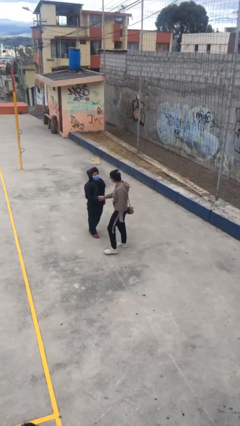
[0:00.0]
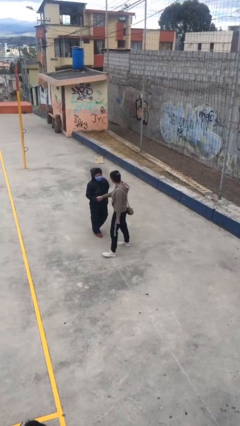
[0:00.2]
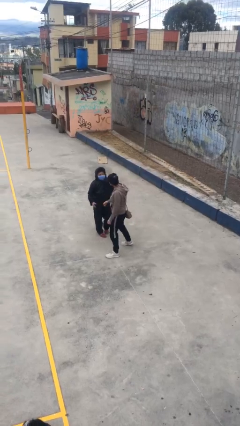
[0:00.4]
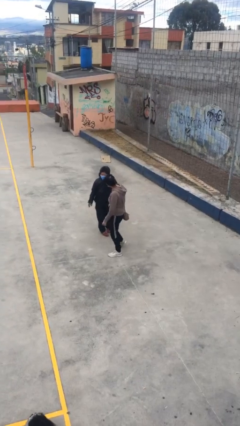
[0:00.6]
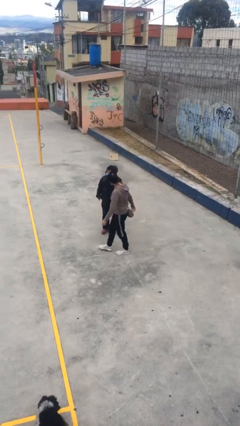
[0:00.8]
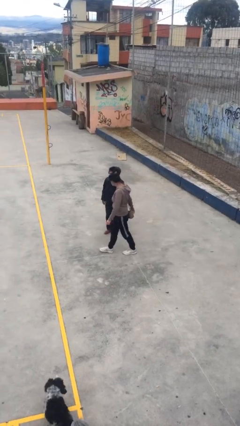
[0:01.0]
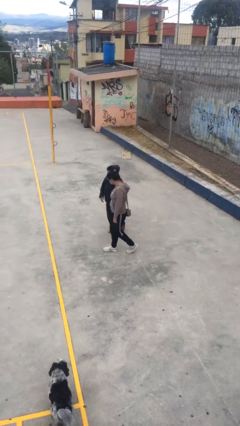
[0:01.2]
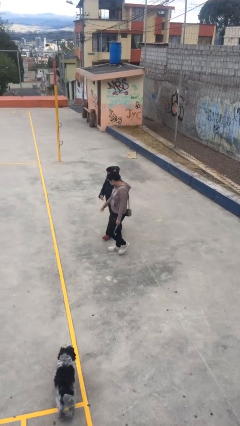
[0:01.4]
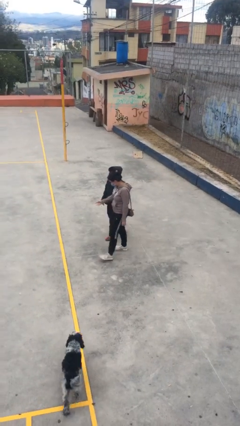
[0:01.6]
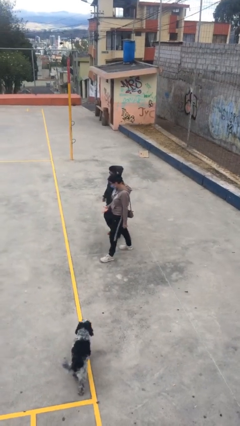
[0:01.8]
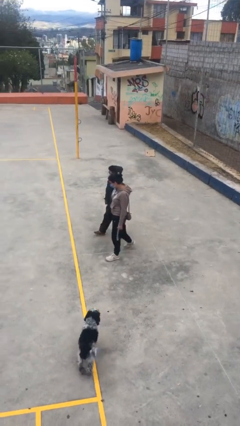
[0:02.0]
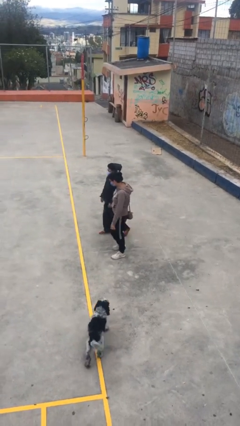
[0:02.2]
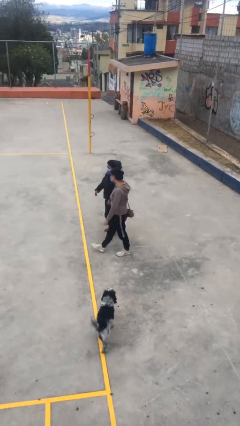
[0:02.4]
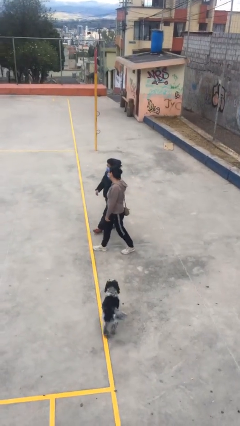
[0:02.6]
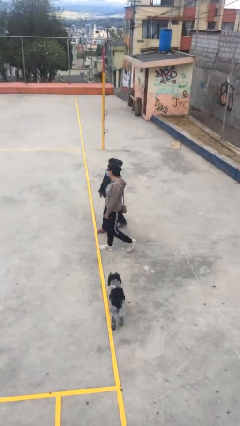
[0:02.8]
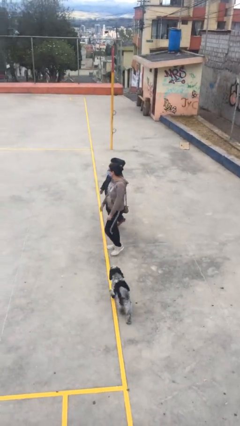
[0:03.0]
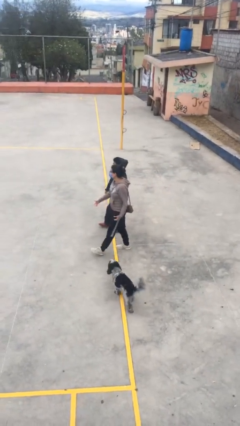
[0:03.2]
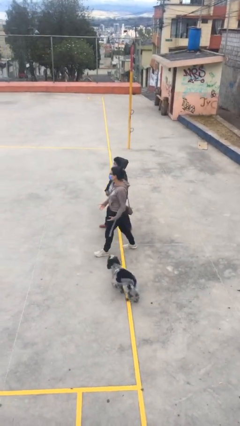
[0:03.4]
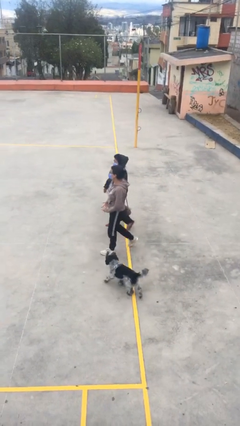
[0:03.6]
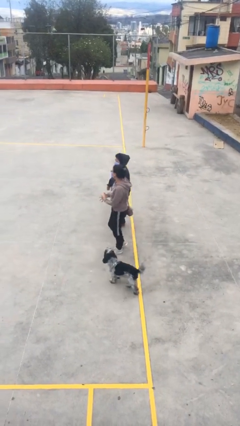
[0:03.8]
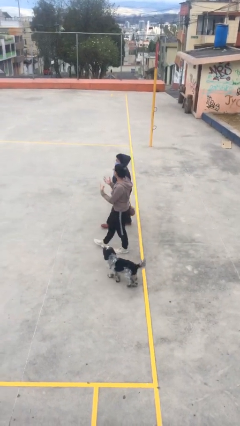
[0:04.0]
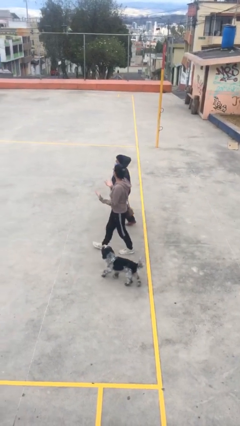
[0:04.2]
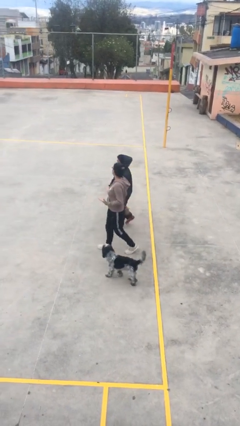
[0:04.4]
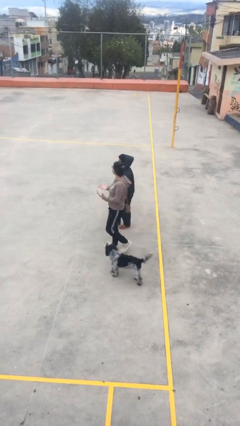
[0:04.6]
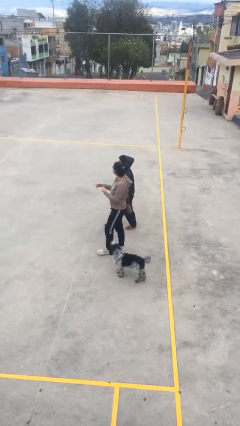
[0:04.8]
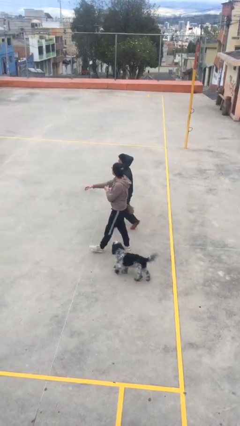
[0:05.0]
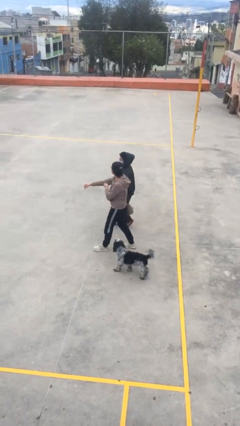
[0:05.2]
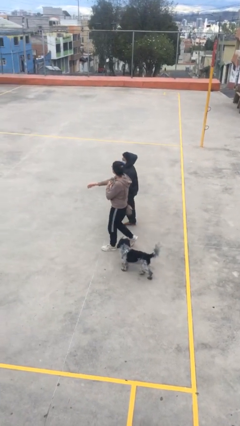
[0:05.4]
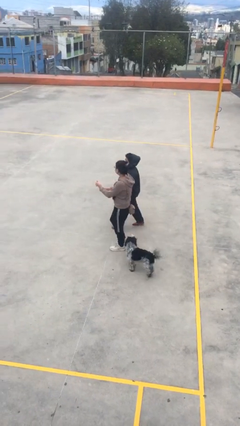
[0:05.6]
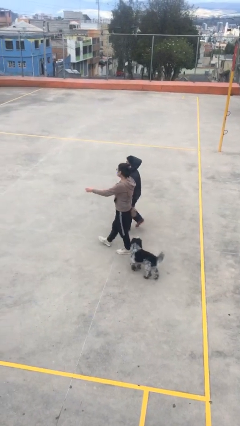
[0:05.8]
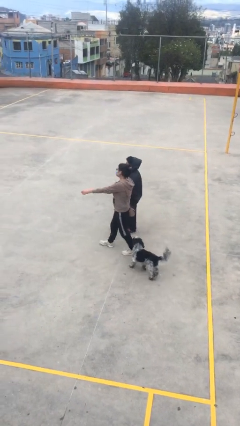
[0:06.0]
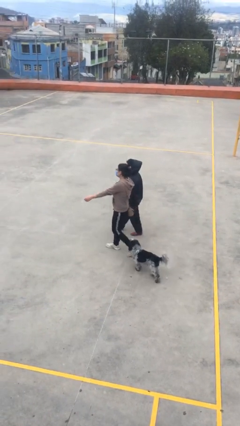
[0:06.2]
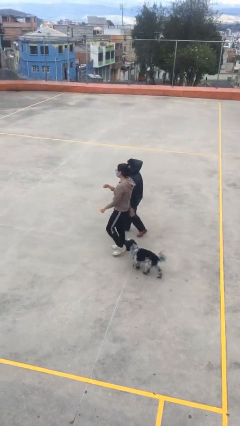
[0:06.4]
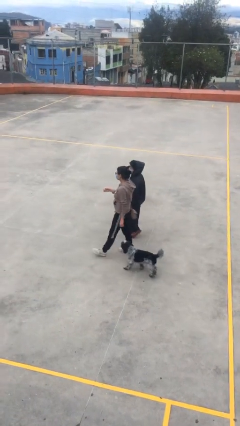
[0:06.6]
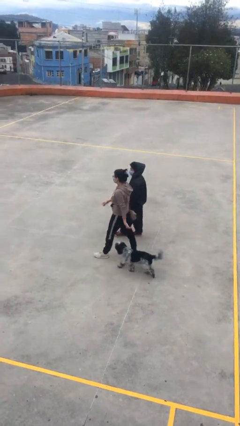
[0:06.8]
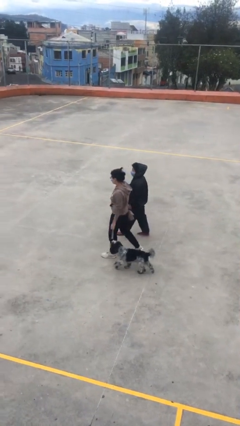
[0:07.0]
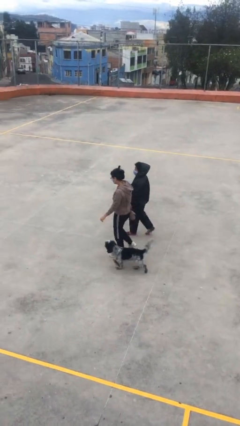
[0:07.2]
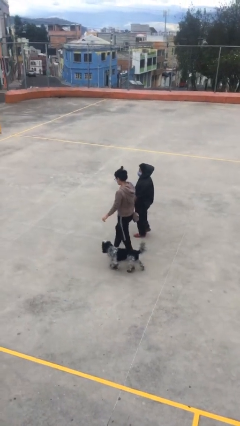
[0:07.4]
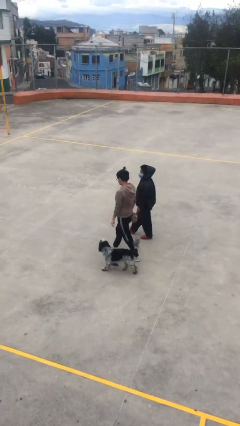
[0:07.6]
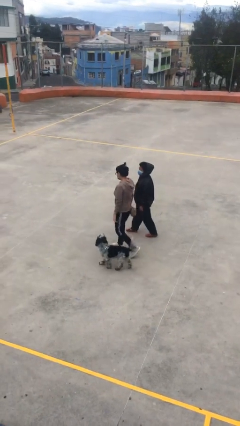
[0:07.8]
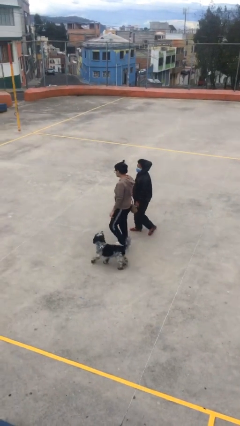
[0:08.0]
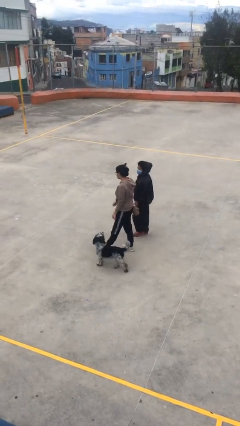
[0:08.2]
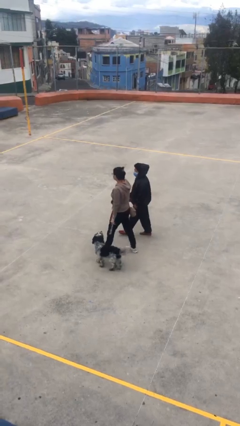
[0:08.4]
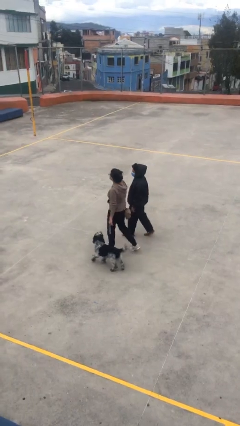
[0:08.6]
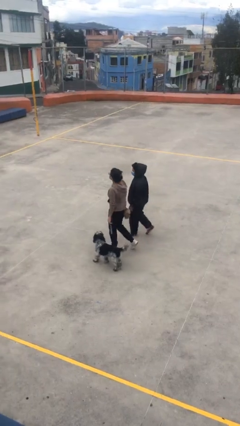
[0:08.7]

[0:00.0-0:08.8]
person talks to person

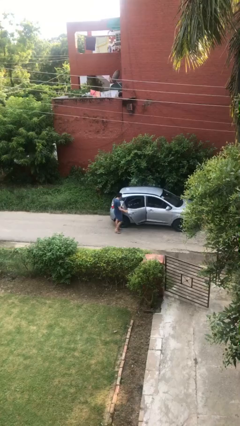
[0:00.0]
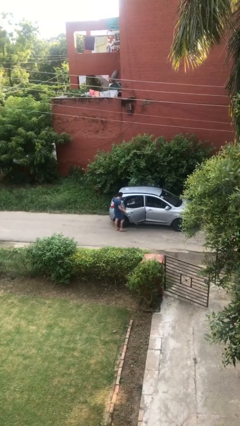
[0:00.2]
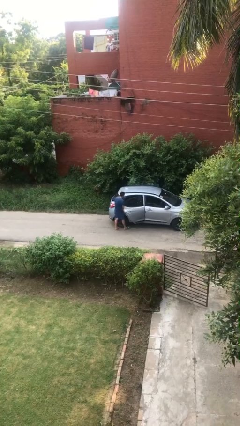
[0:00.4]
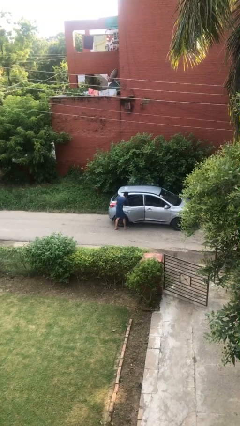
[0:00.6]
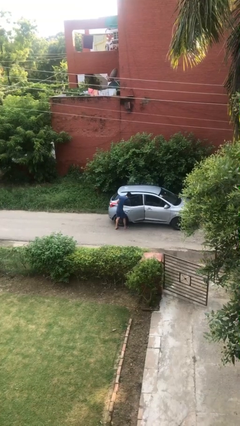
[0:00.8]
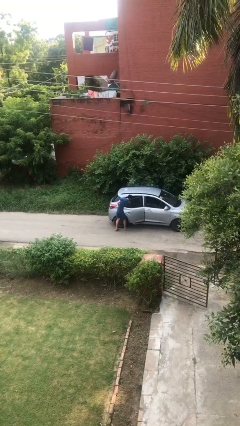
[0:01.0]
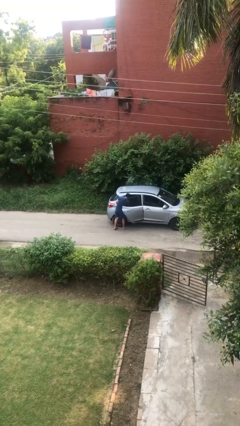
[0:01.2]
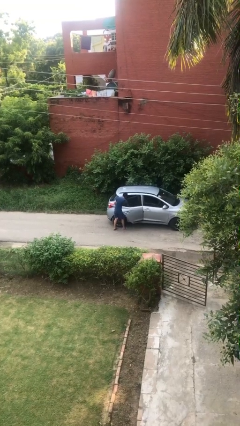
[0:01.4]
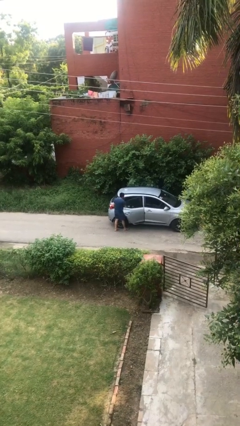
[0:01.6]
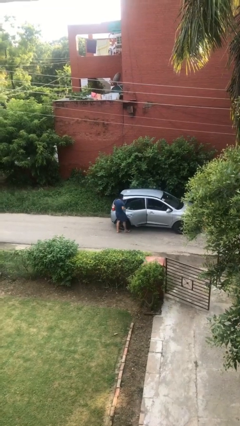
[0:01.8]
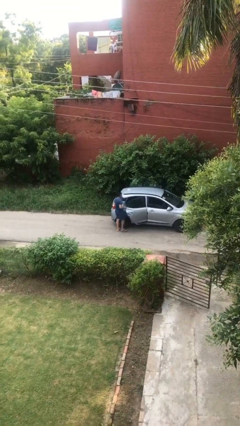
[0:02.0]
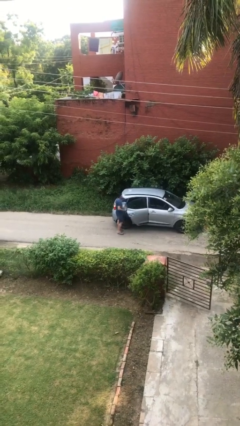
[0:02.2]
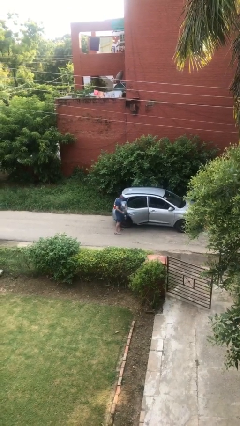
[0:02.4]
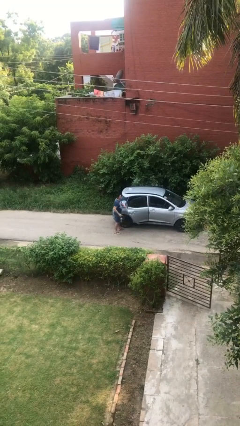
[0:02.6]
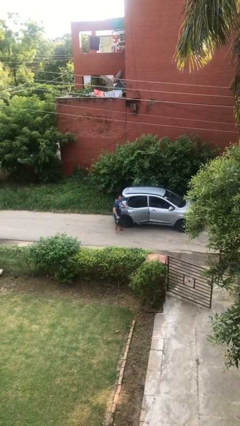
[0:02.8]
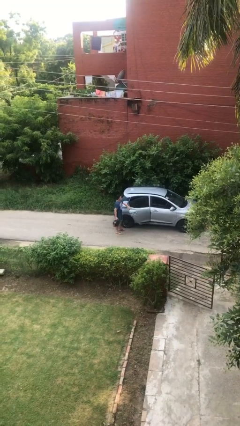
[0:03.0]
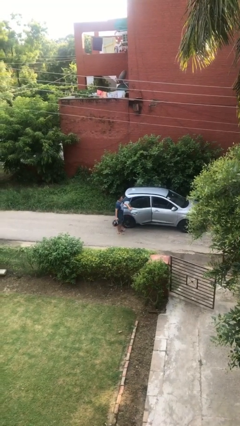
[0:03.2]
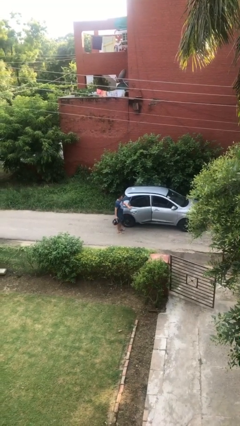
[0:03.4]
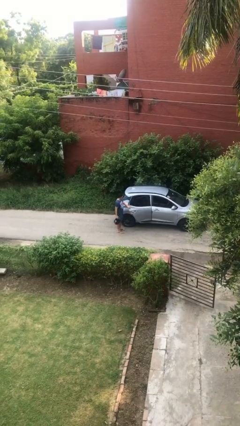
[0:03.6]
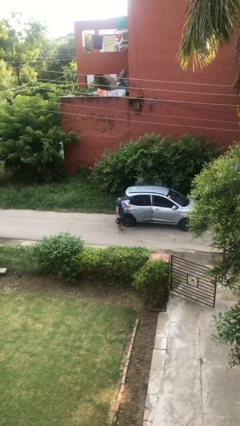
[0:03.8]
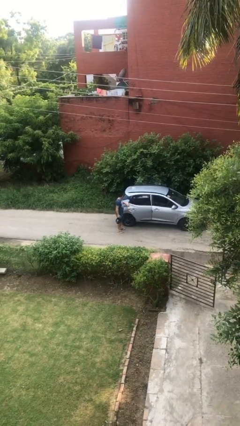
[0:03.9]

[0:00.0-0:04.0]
person unloads car

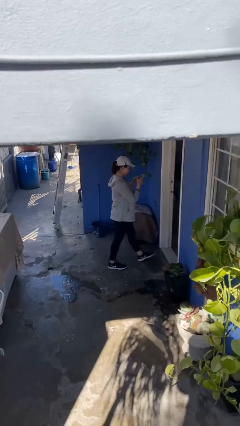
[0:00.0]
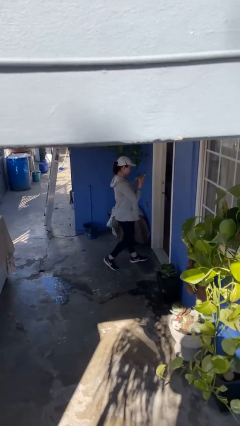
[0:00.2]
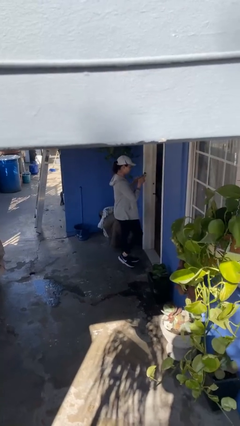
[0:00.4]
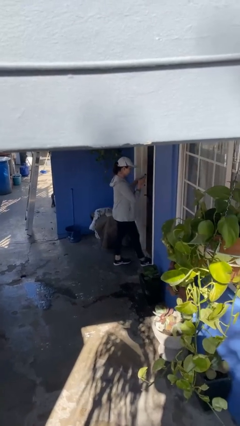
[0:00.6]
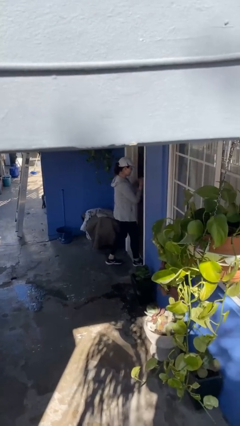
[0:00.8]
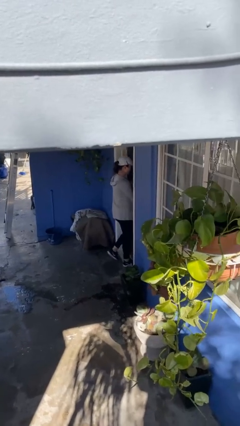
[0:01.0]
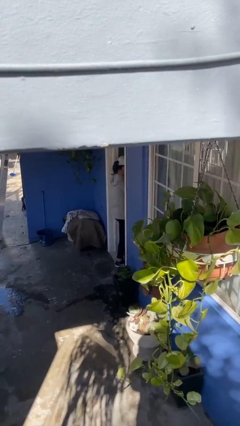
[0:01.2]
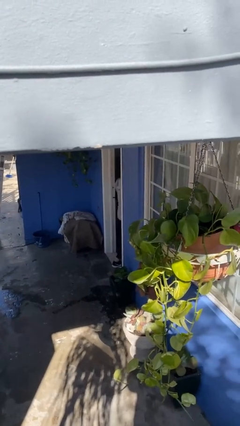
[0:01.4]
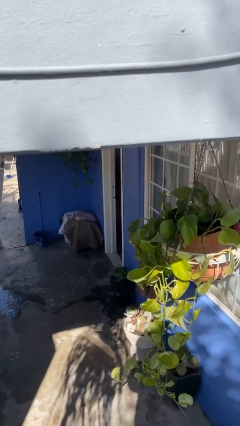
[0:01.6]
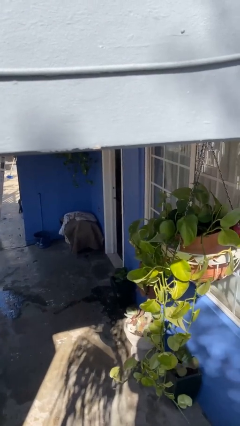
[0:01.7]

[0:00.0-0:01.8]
person exits scene through structure

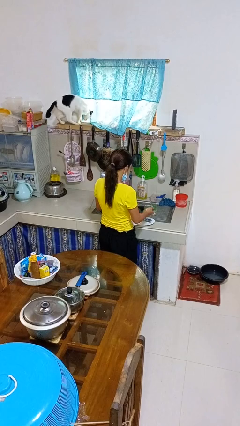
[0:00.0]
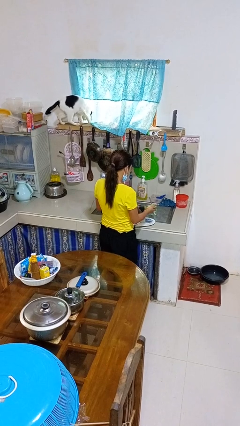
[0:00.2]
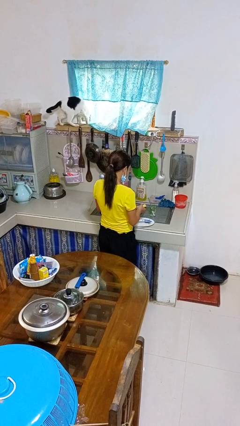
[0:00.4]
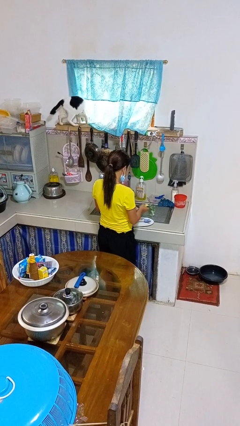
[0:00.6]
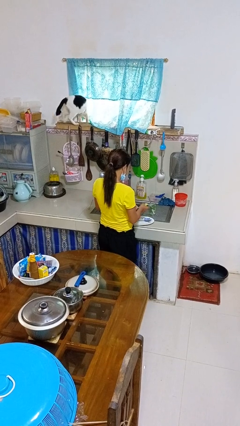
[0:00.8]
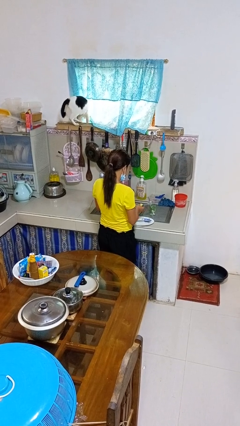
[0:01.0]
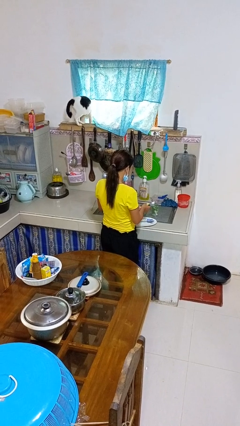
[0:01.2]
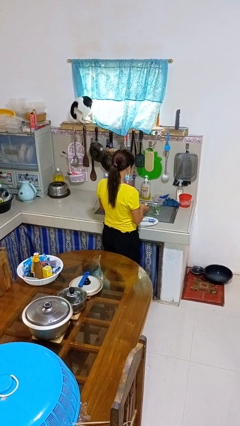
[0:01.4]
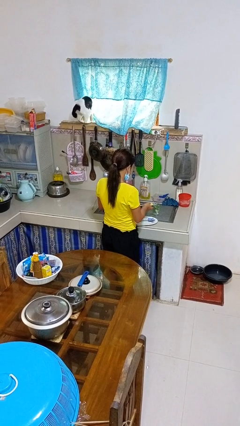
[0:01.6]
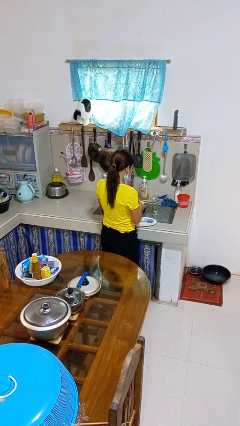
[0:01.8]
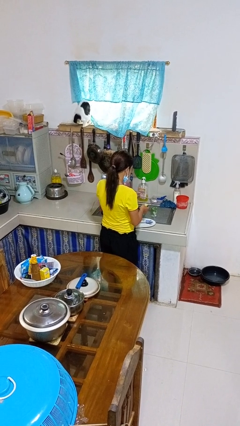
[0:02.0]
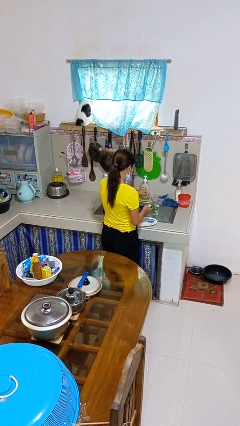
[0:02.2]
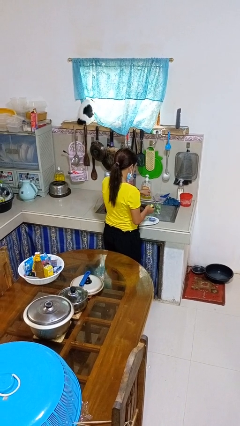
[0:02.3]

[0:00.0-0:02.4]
person washes dish

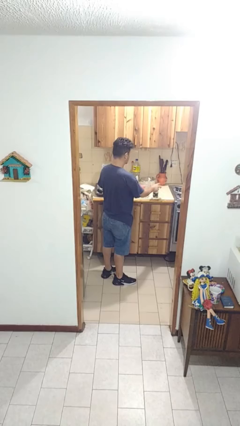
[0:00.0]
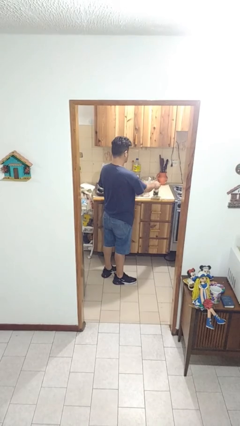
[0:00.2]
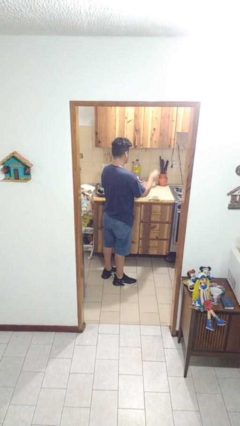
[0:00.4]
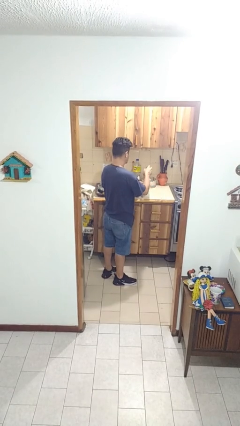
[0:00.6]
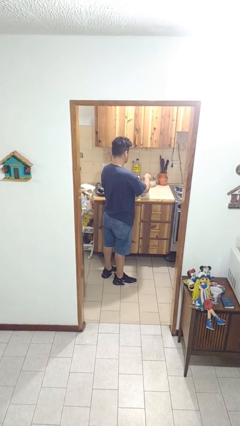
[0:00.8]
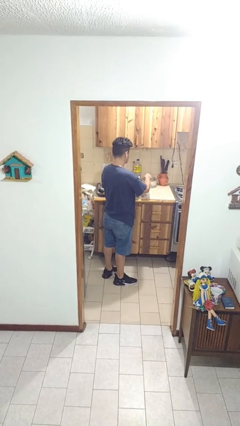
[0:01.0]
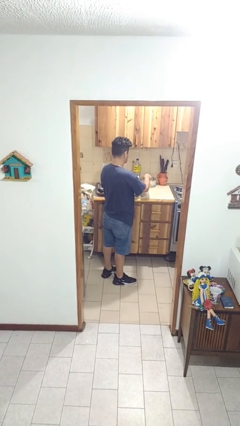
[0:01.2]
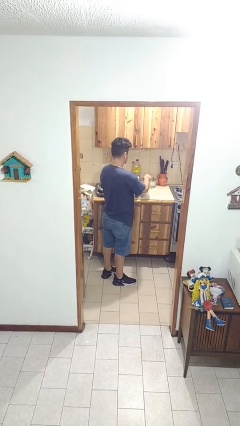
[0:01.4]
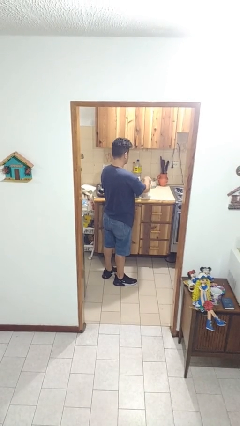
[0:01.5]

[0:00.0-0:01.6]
person puts object into bag
